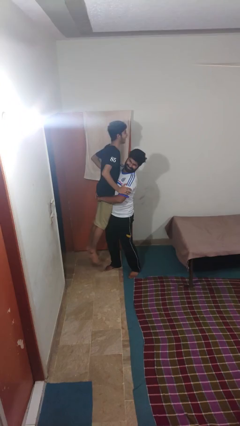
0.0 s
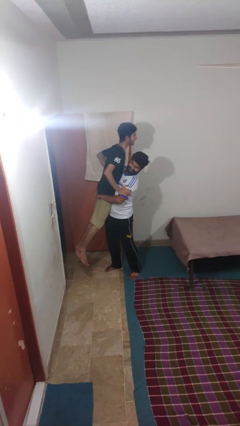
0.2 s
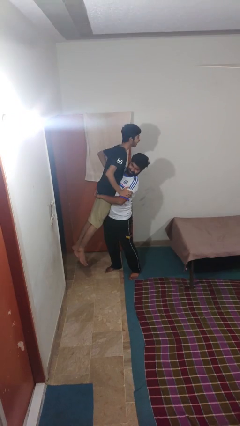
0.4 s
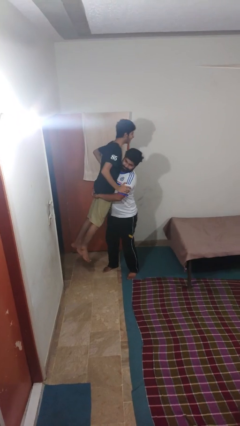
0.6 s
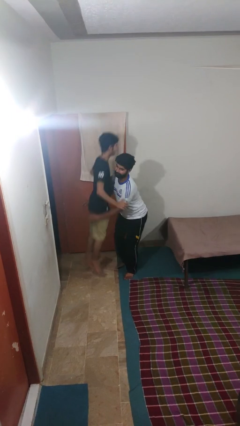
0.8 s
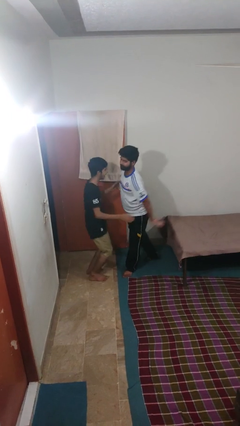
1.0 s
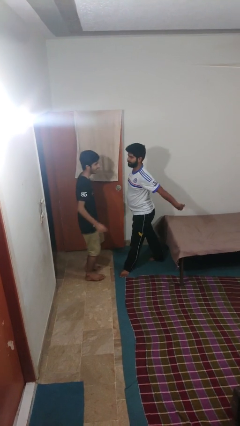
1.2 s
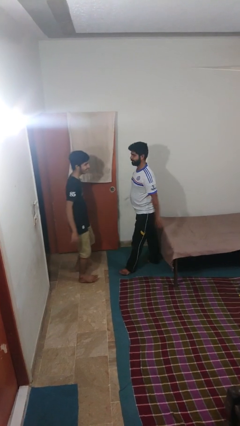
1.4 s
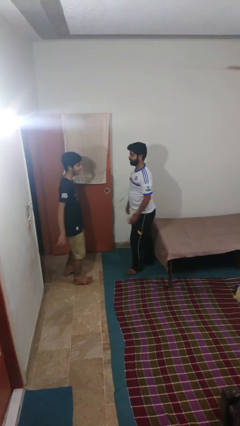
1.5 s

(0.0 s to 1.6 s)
person puts down person

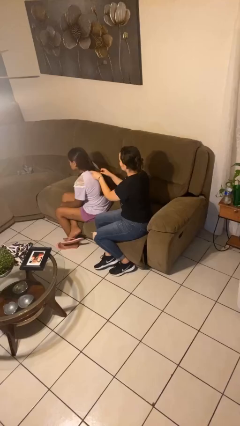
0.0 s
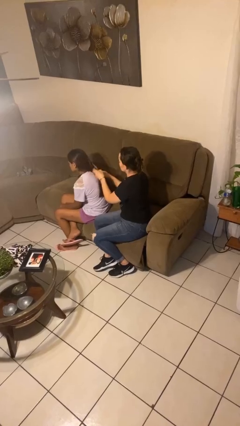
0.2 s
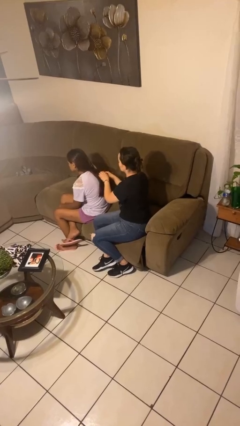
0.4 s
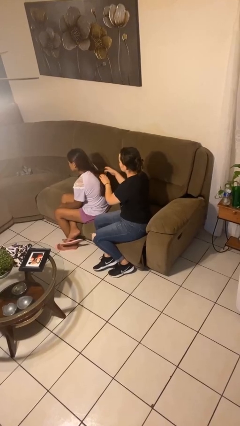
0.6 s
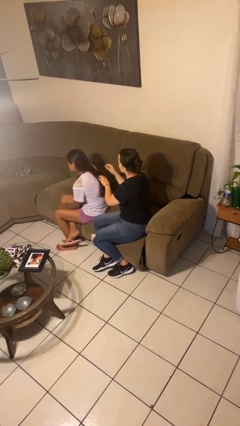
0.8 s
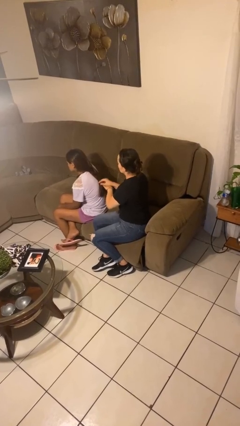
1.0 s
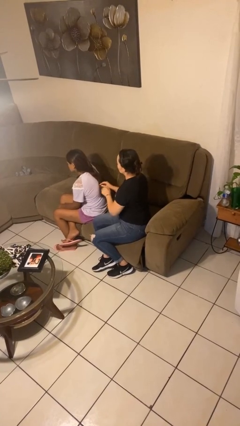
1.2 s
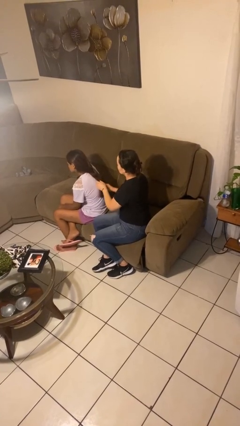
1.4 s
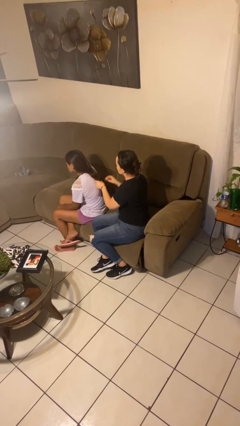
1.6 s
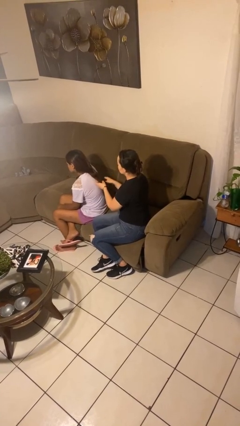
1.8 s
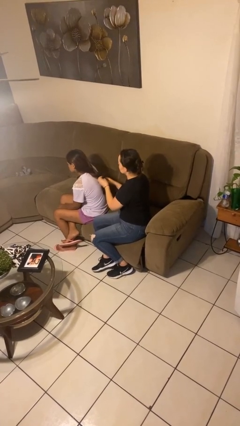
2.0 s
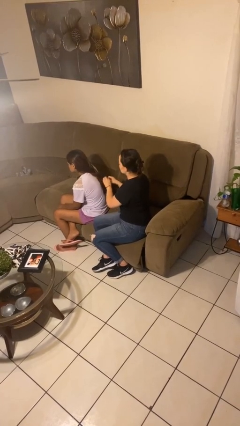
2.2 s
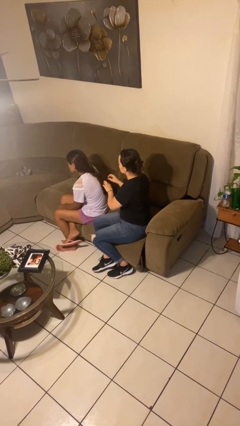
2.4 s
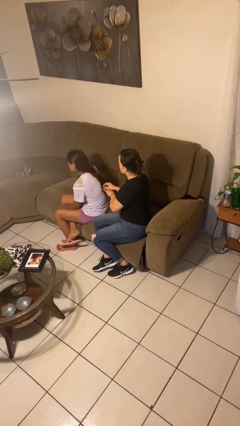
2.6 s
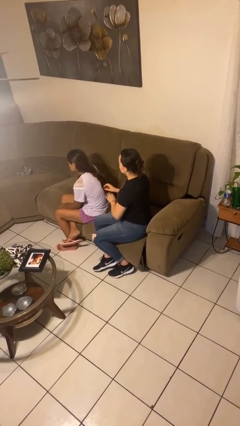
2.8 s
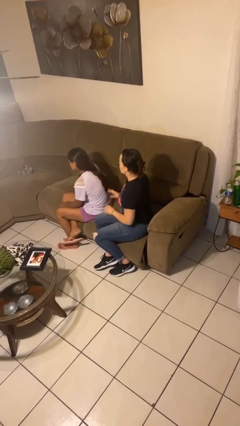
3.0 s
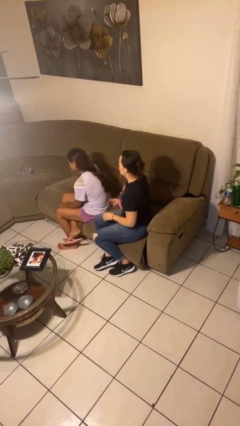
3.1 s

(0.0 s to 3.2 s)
person braids hair of person

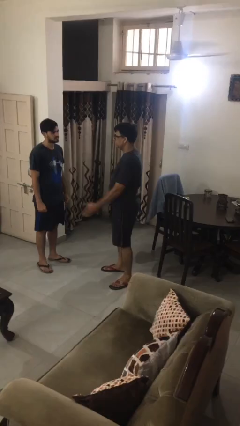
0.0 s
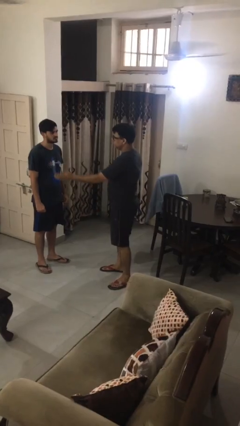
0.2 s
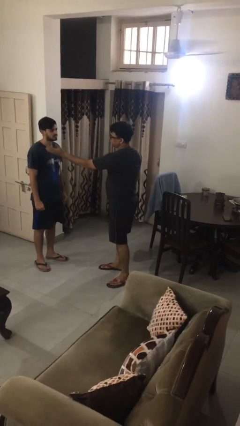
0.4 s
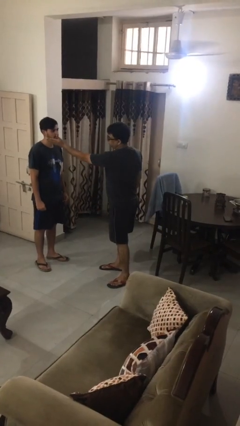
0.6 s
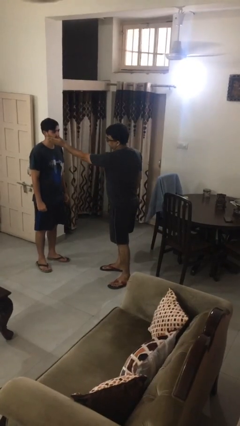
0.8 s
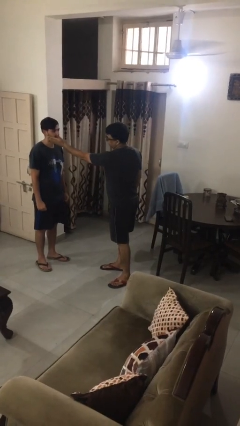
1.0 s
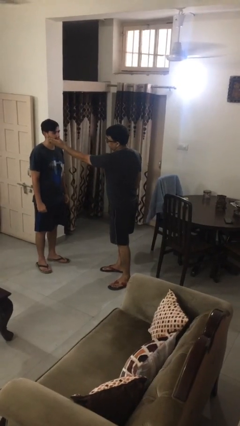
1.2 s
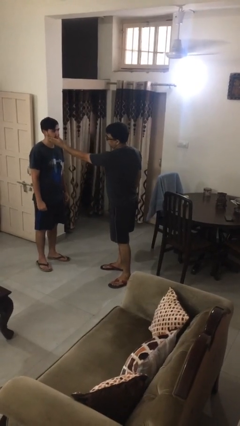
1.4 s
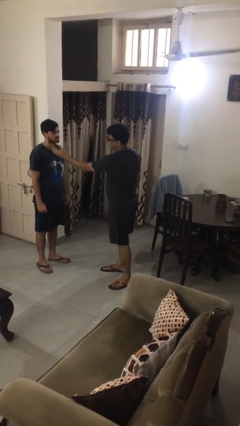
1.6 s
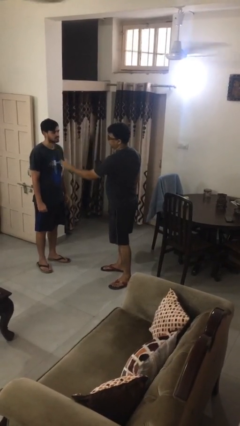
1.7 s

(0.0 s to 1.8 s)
person touches face of person

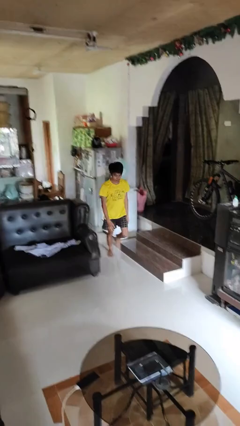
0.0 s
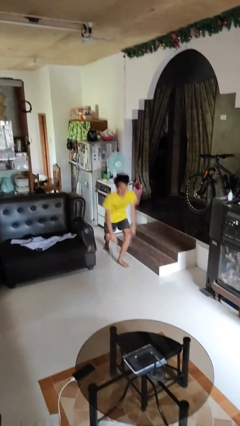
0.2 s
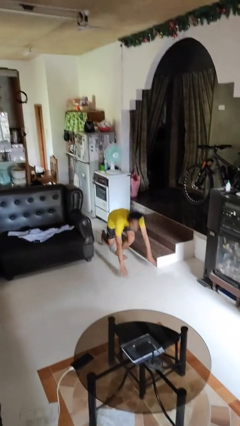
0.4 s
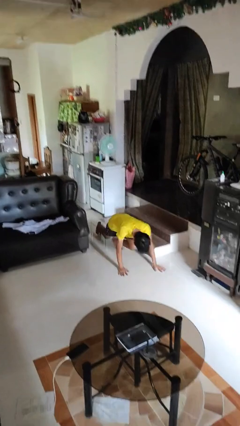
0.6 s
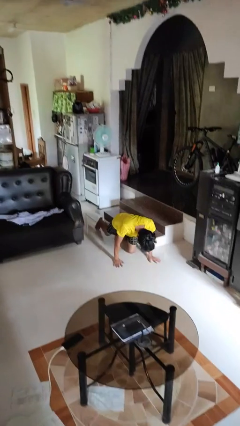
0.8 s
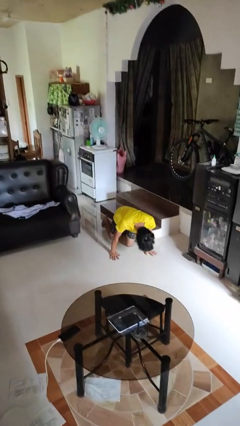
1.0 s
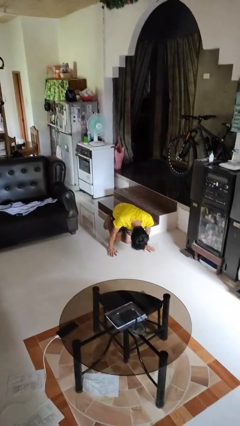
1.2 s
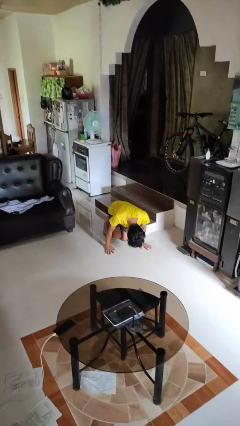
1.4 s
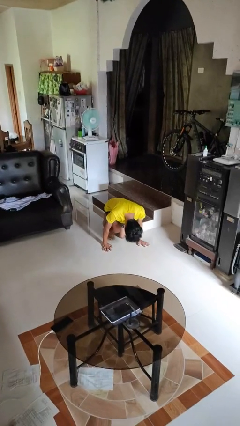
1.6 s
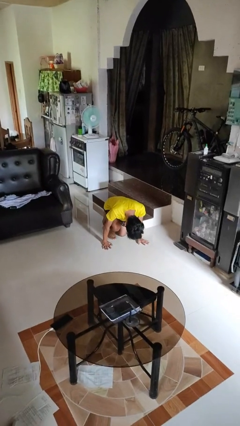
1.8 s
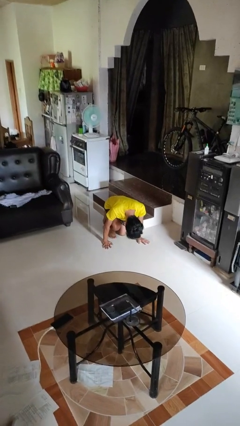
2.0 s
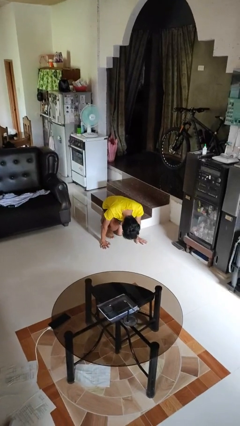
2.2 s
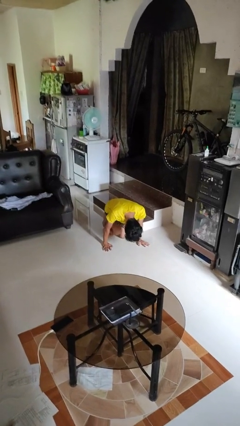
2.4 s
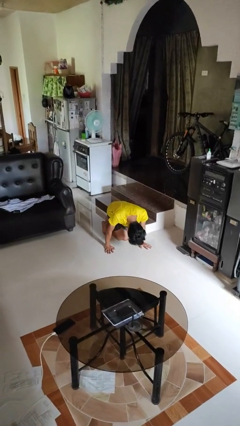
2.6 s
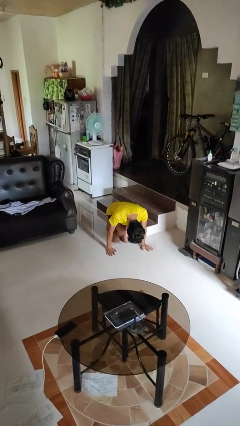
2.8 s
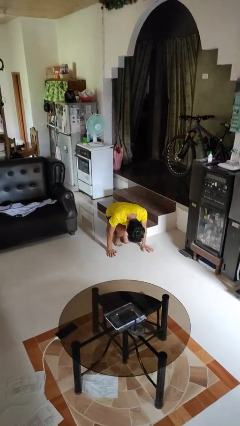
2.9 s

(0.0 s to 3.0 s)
person trips on object on floor

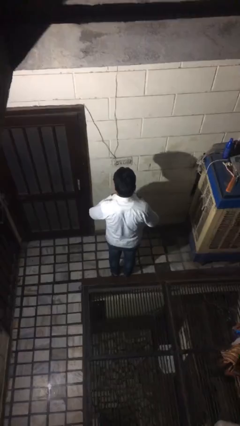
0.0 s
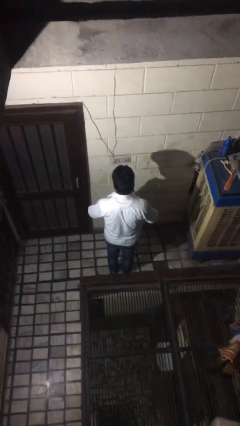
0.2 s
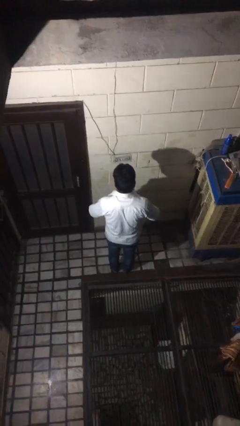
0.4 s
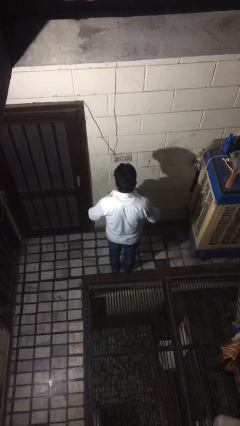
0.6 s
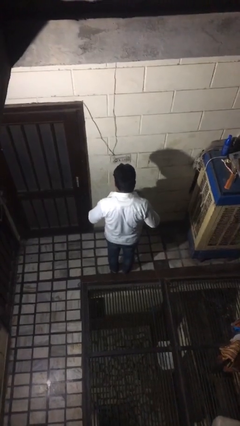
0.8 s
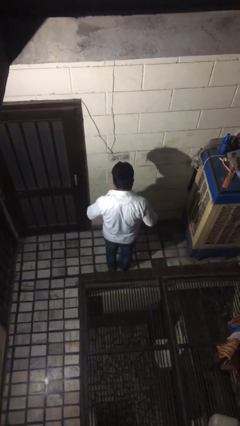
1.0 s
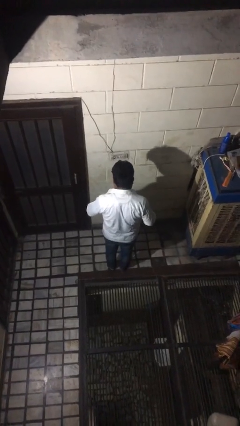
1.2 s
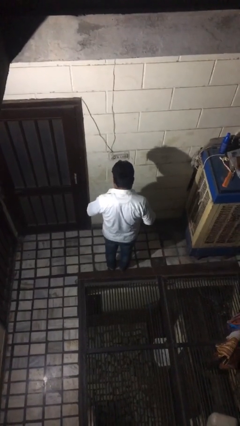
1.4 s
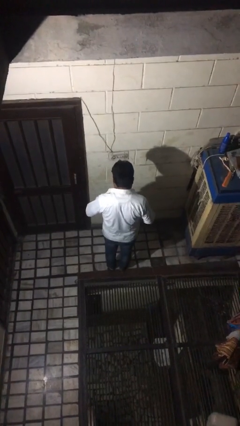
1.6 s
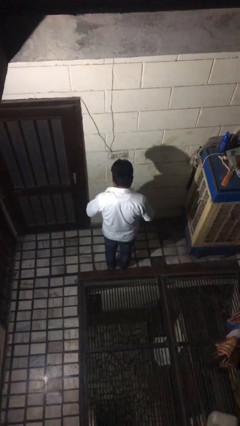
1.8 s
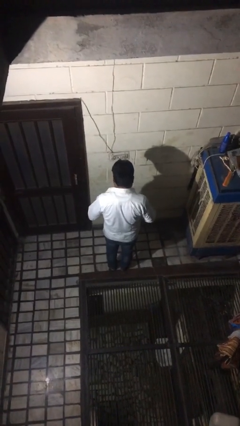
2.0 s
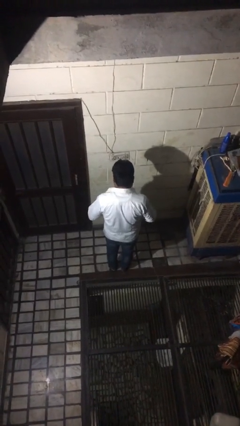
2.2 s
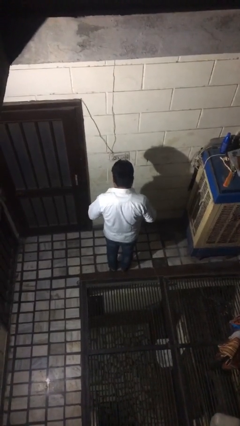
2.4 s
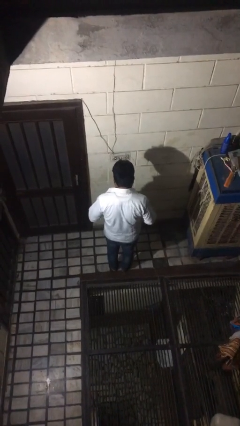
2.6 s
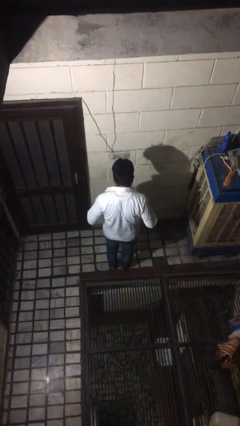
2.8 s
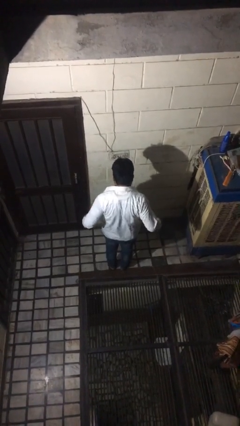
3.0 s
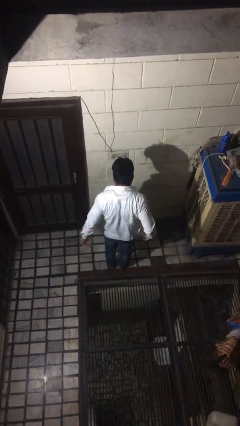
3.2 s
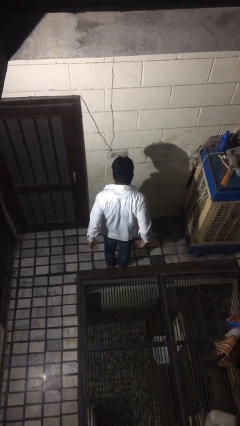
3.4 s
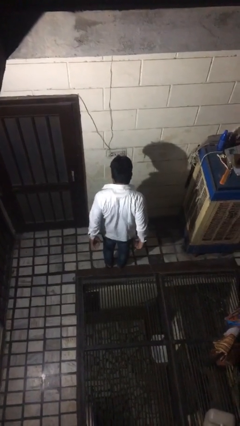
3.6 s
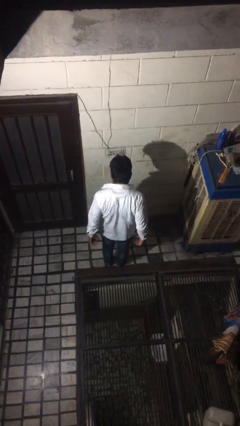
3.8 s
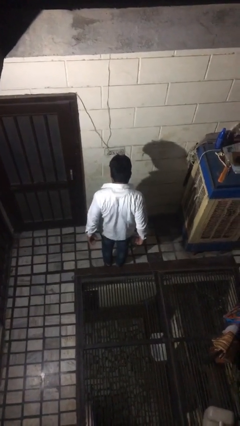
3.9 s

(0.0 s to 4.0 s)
person unbuttons shirt

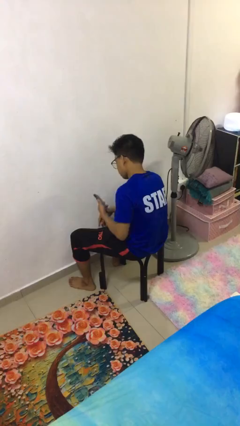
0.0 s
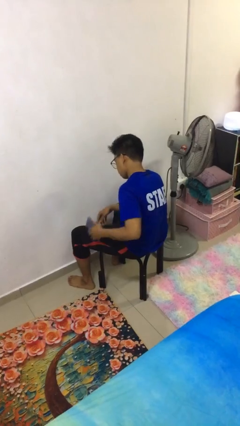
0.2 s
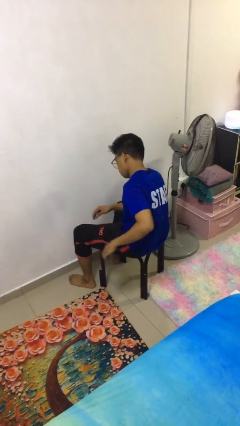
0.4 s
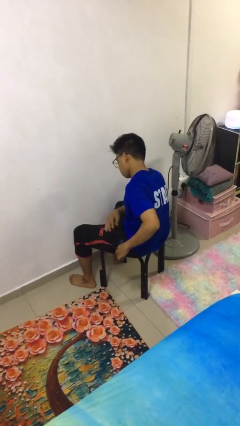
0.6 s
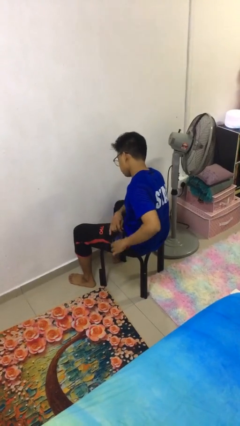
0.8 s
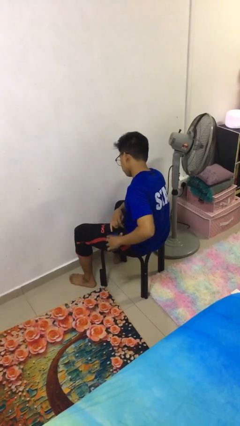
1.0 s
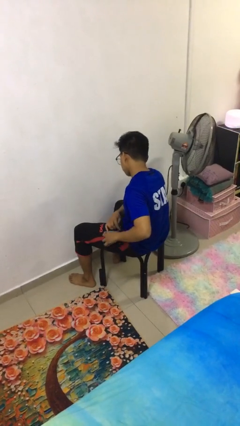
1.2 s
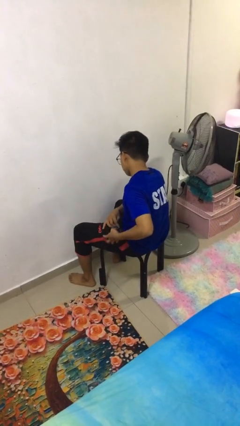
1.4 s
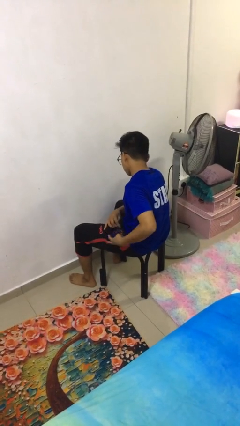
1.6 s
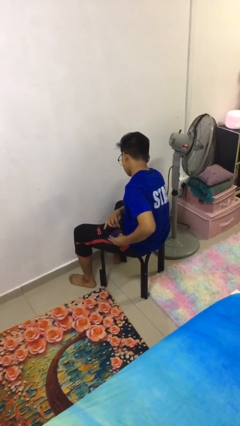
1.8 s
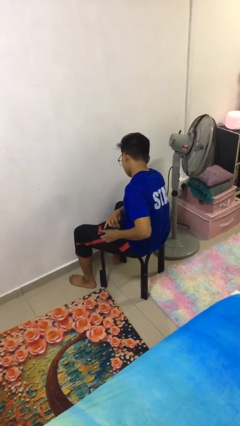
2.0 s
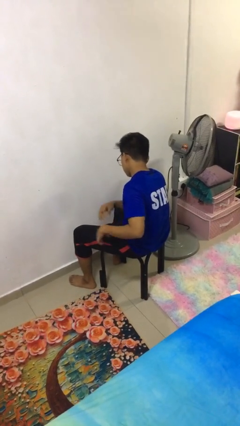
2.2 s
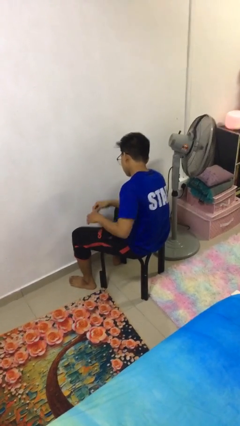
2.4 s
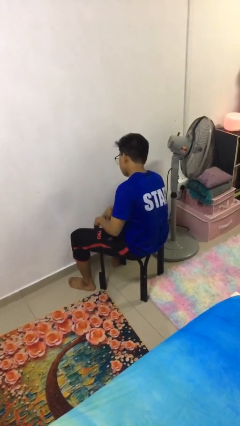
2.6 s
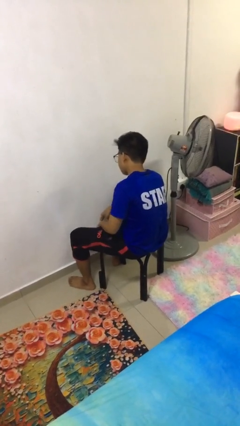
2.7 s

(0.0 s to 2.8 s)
person puts phone into pocket

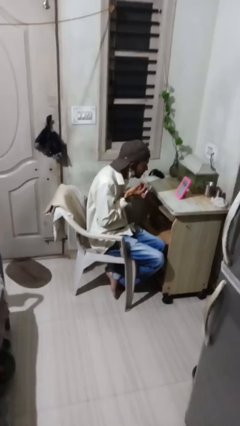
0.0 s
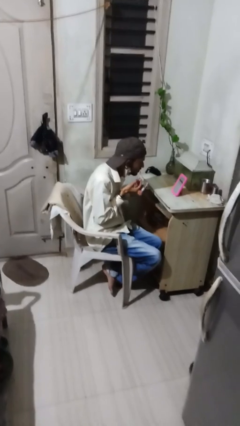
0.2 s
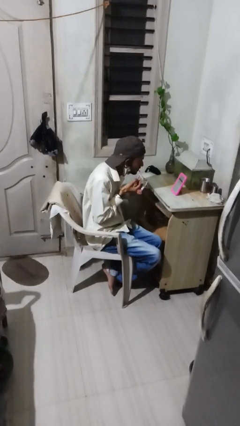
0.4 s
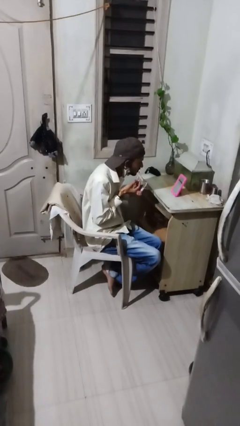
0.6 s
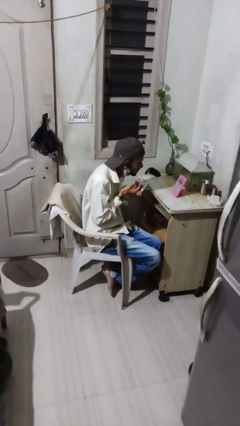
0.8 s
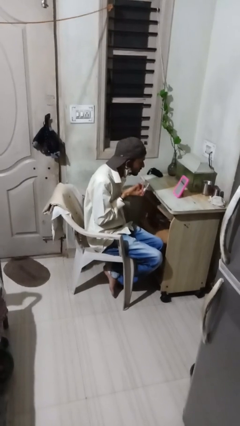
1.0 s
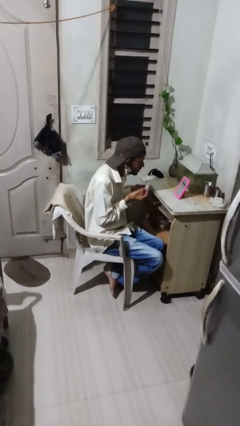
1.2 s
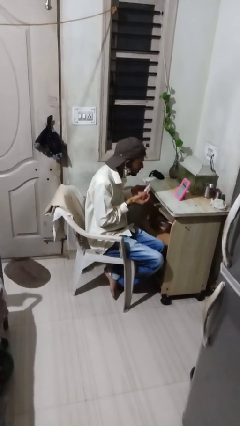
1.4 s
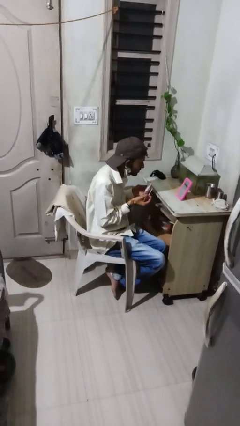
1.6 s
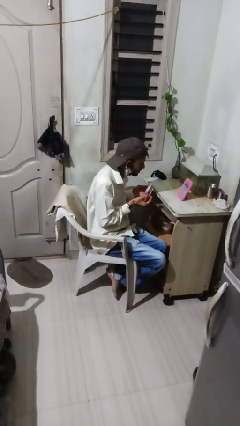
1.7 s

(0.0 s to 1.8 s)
person applies lip makeup
